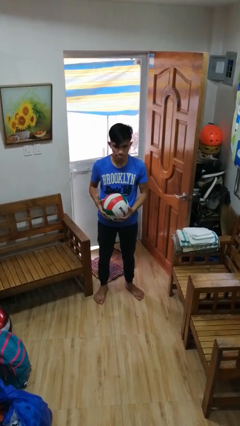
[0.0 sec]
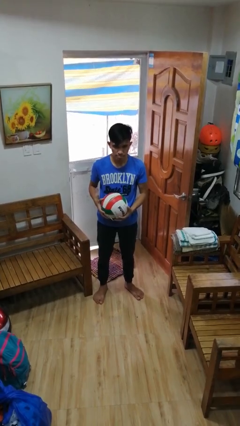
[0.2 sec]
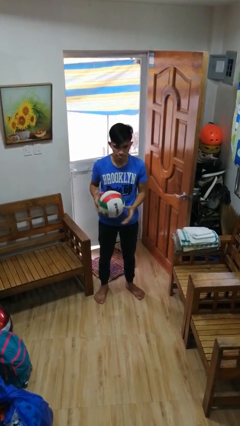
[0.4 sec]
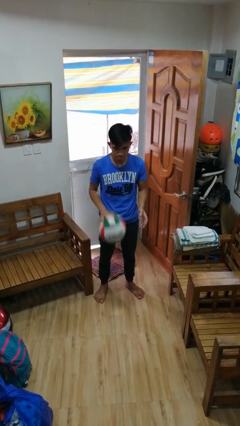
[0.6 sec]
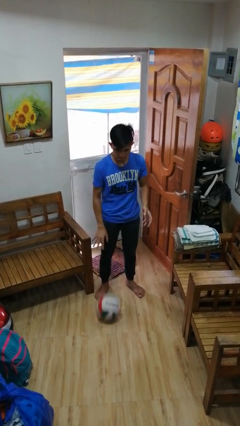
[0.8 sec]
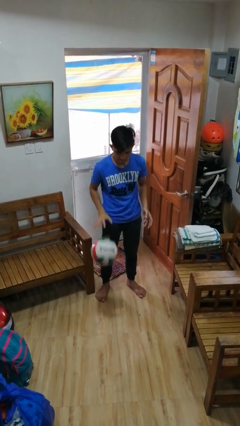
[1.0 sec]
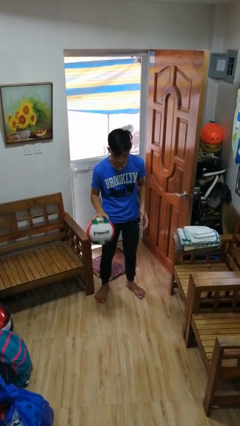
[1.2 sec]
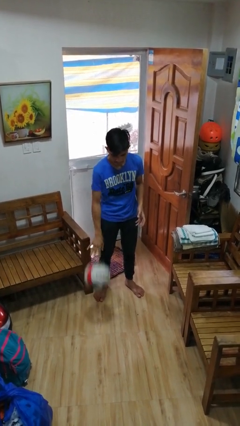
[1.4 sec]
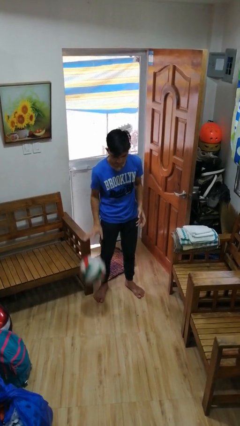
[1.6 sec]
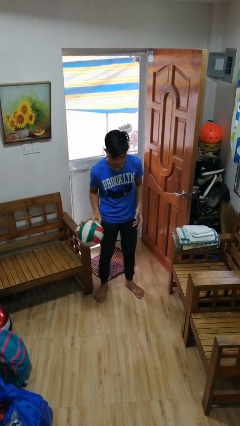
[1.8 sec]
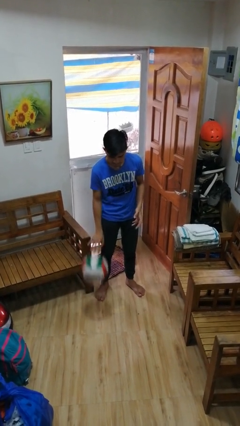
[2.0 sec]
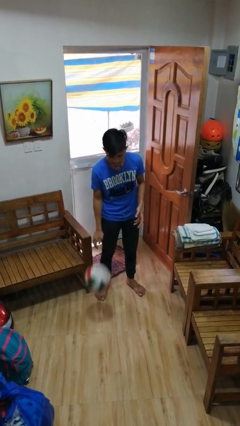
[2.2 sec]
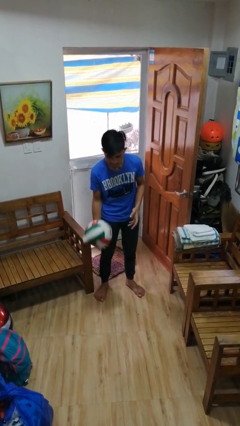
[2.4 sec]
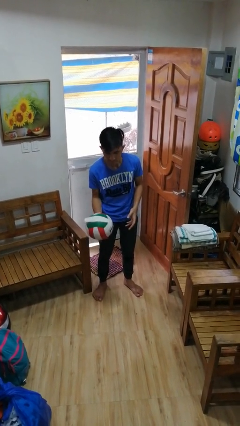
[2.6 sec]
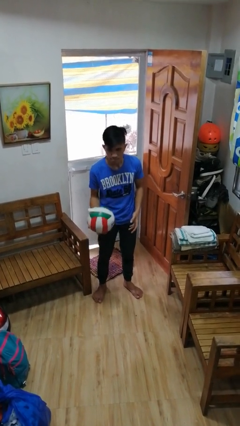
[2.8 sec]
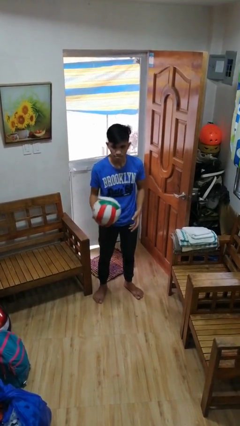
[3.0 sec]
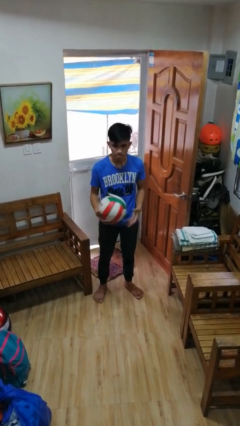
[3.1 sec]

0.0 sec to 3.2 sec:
person bounces ball on floor

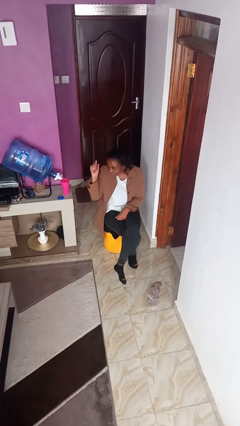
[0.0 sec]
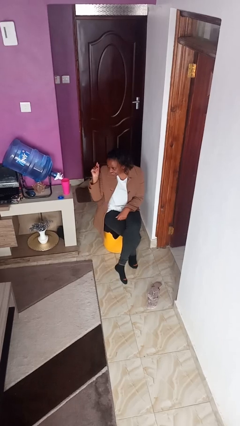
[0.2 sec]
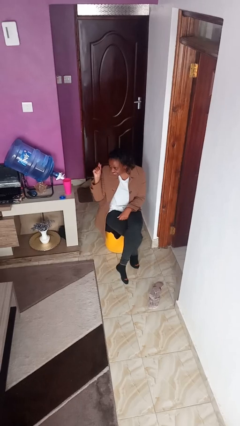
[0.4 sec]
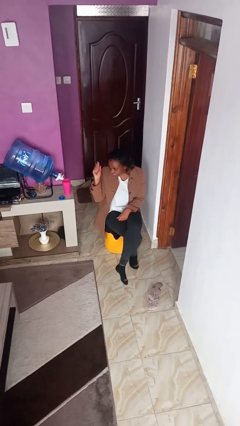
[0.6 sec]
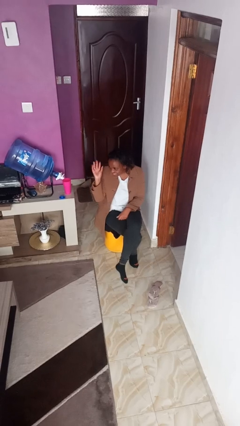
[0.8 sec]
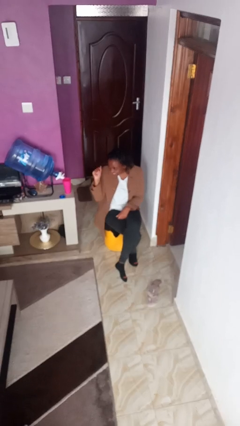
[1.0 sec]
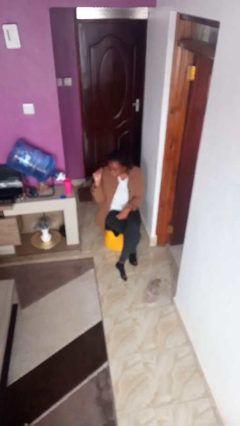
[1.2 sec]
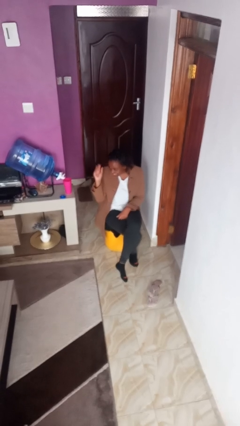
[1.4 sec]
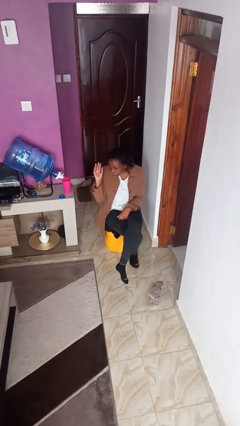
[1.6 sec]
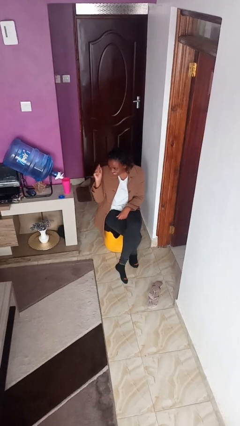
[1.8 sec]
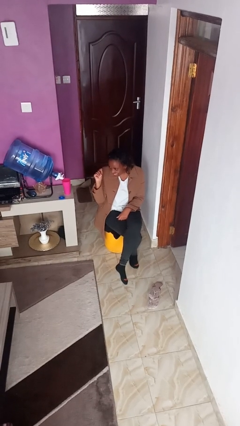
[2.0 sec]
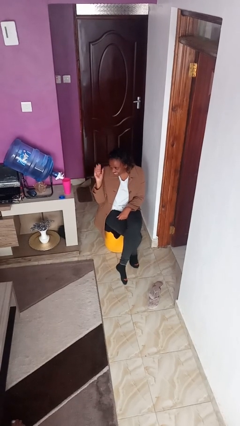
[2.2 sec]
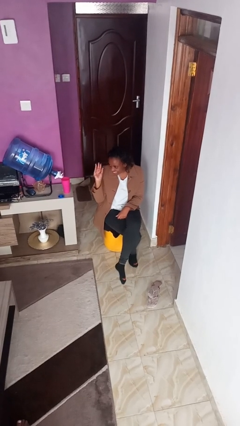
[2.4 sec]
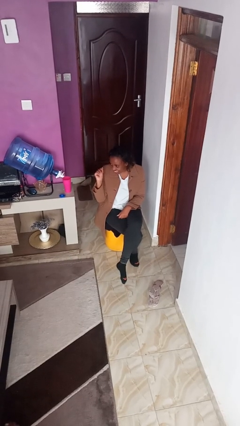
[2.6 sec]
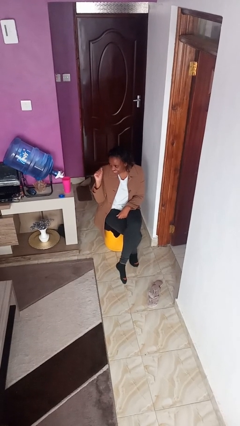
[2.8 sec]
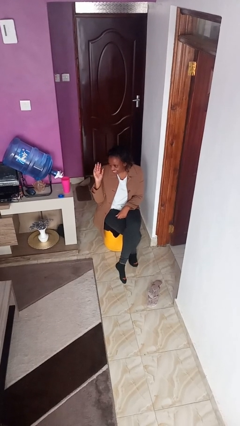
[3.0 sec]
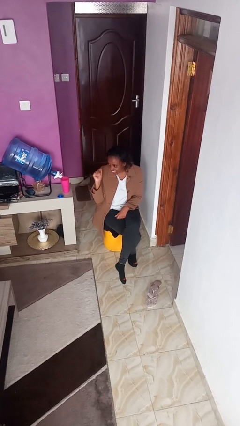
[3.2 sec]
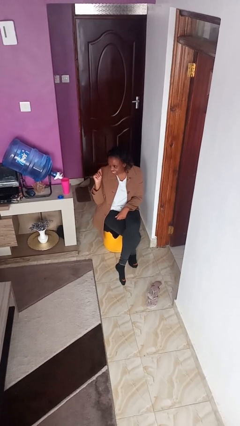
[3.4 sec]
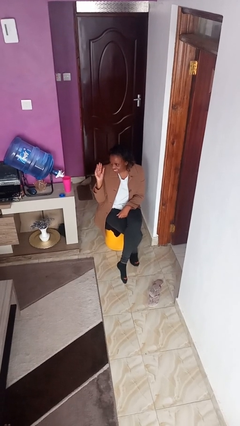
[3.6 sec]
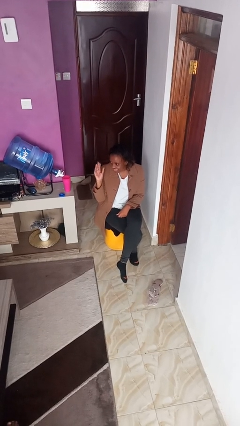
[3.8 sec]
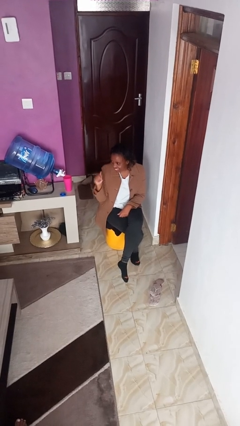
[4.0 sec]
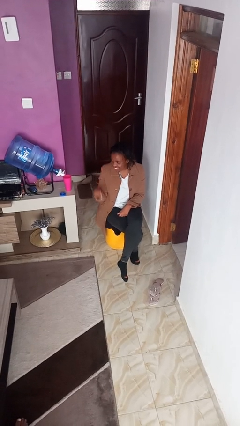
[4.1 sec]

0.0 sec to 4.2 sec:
person gestures come here

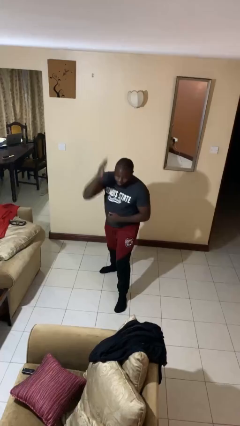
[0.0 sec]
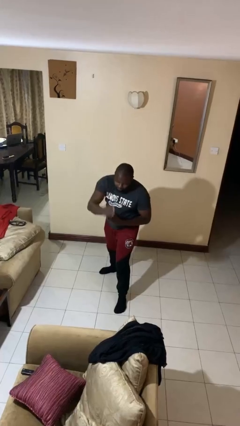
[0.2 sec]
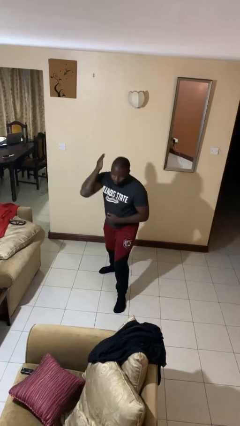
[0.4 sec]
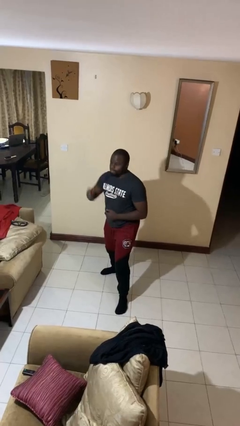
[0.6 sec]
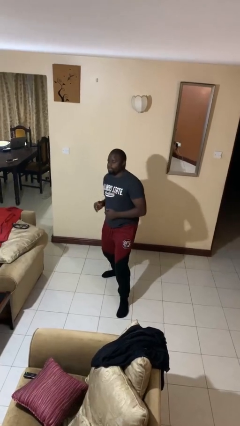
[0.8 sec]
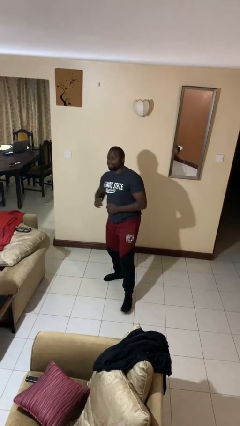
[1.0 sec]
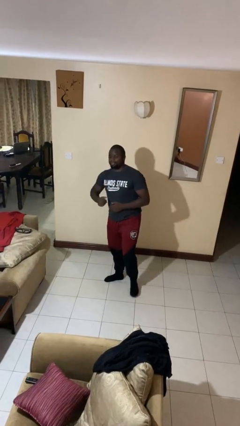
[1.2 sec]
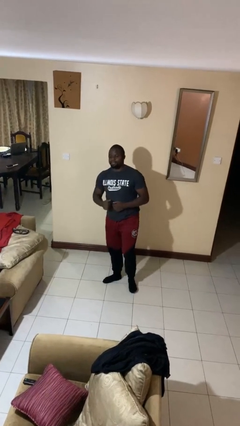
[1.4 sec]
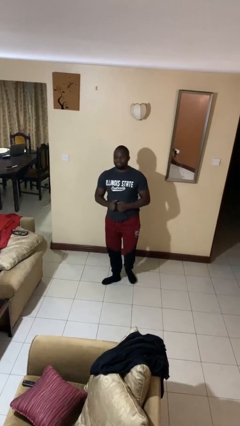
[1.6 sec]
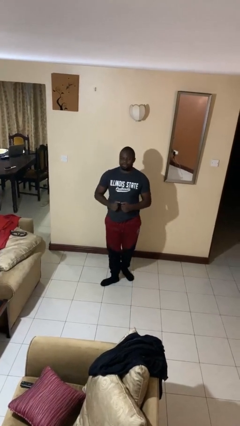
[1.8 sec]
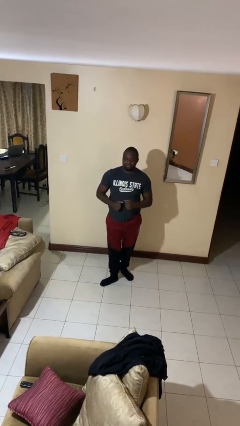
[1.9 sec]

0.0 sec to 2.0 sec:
person karate chop

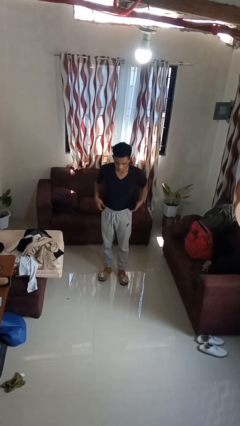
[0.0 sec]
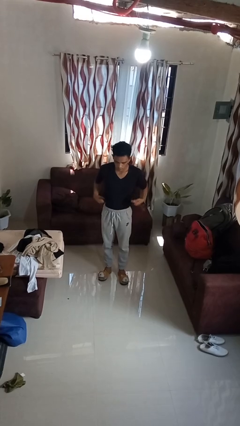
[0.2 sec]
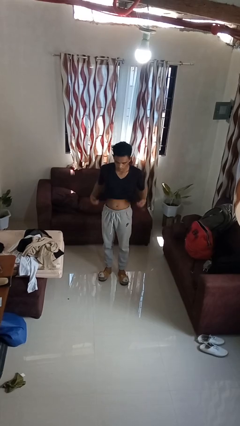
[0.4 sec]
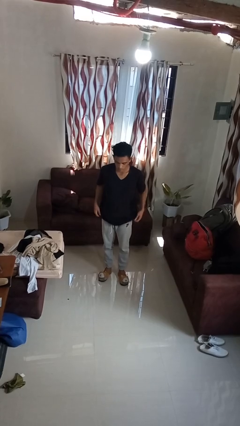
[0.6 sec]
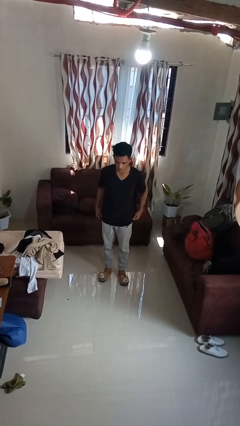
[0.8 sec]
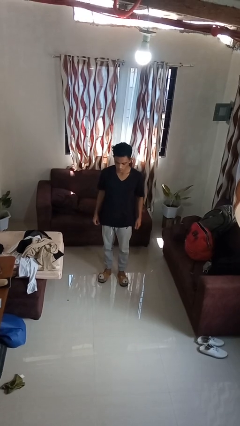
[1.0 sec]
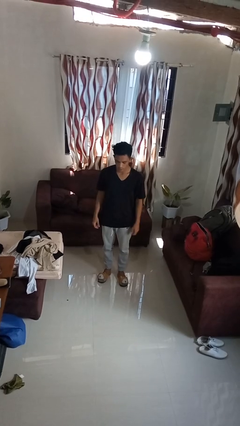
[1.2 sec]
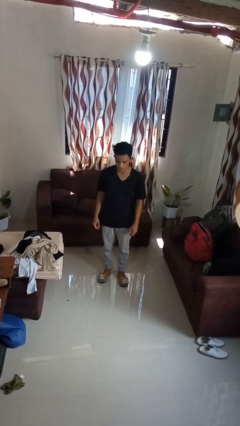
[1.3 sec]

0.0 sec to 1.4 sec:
person untucks shirt

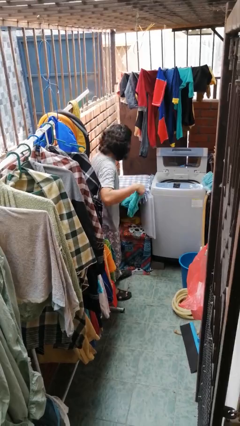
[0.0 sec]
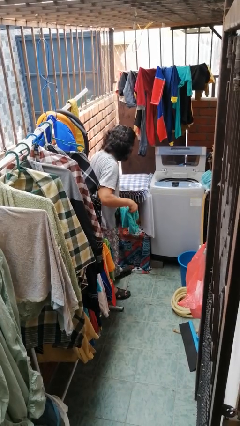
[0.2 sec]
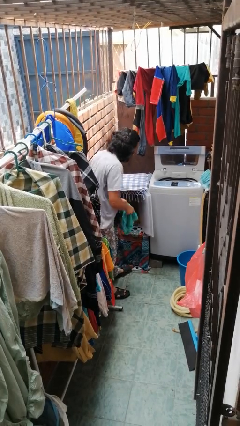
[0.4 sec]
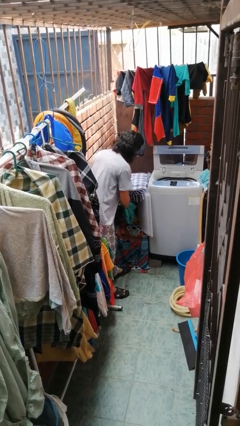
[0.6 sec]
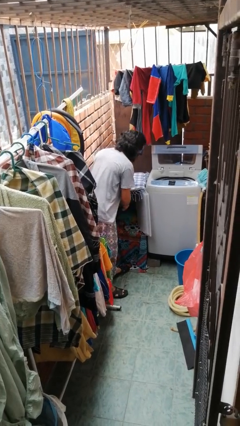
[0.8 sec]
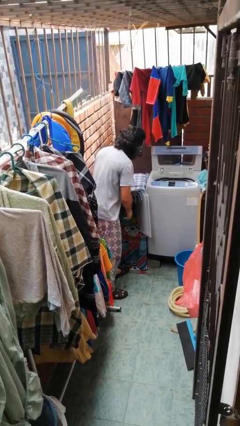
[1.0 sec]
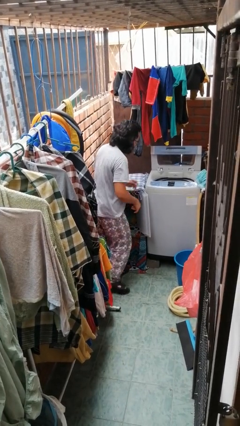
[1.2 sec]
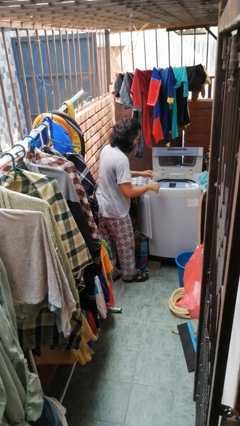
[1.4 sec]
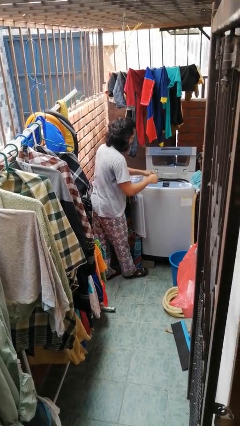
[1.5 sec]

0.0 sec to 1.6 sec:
person loads dryer

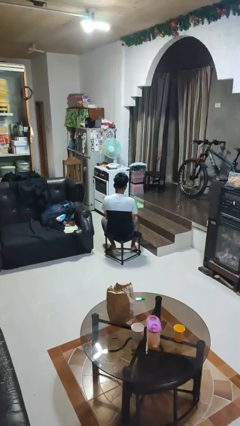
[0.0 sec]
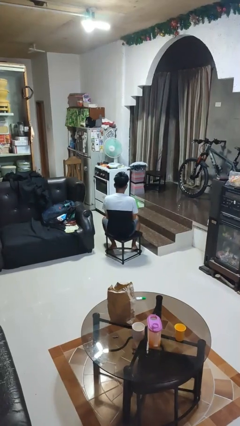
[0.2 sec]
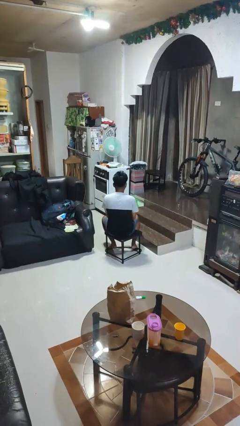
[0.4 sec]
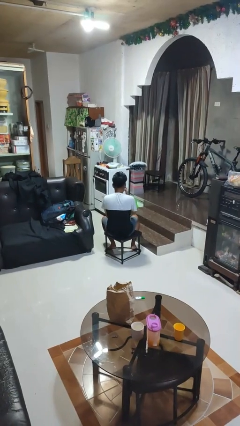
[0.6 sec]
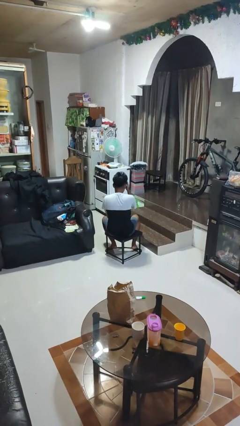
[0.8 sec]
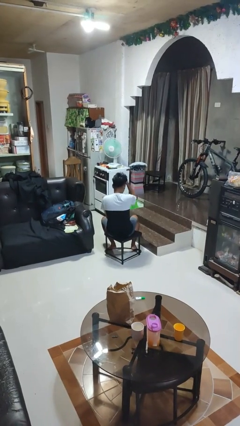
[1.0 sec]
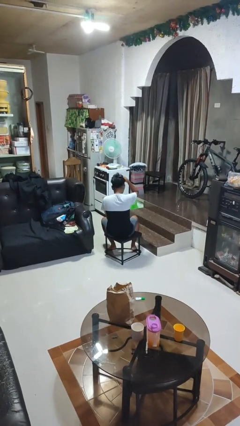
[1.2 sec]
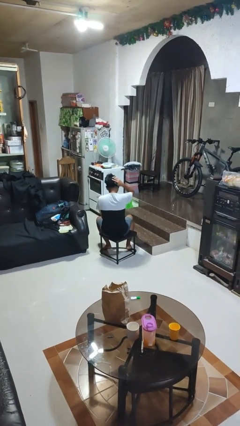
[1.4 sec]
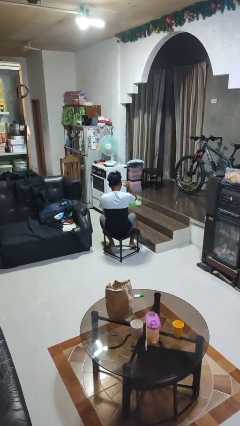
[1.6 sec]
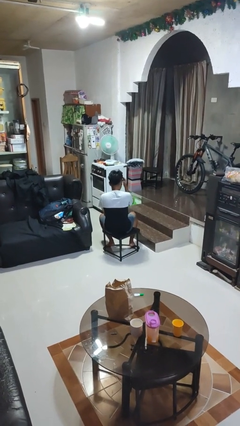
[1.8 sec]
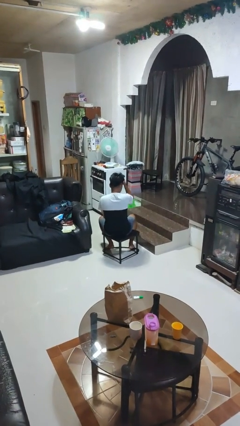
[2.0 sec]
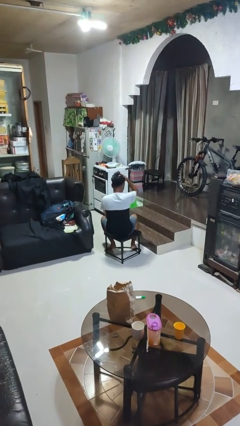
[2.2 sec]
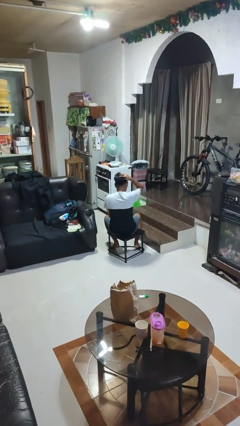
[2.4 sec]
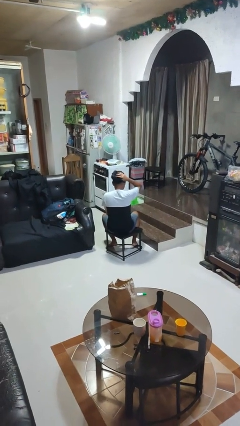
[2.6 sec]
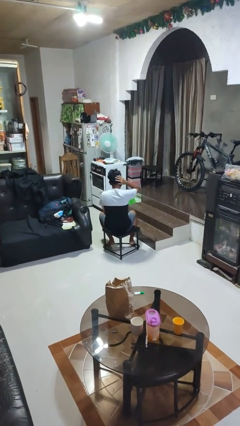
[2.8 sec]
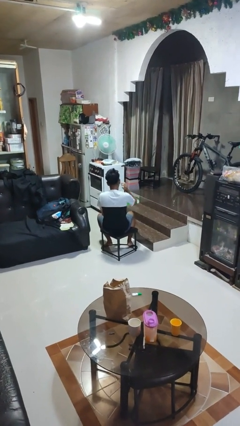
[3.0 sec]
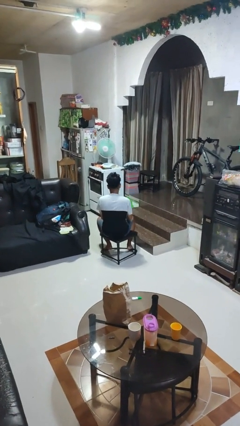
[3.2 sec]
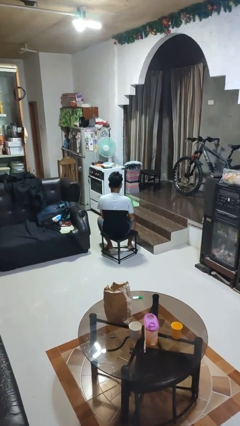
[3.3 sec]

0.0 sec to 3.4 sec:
person strokes hair

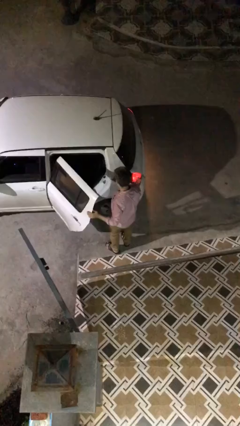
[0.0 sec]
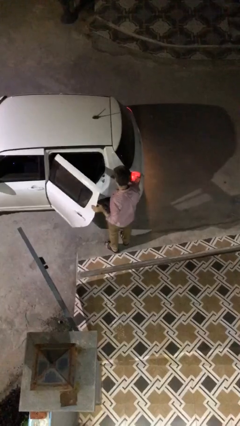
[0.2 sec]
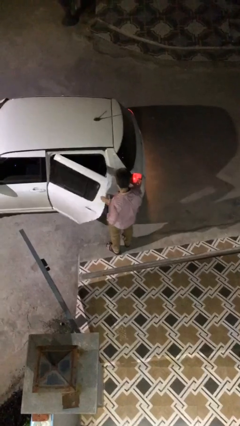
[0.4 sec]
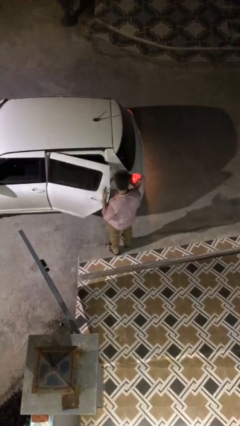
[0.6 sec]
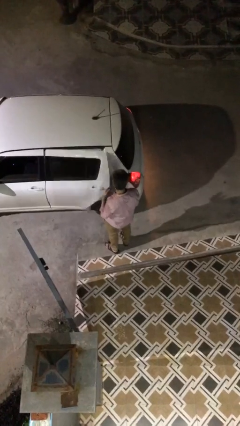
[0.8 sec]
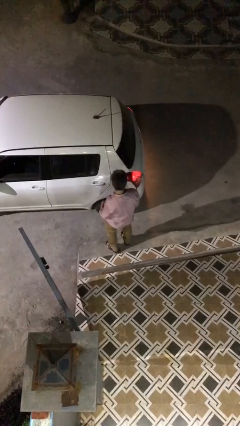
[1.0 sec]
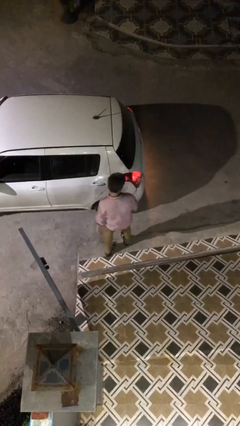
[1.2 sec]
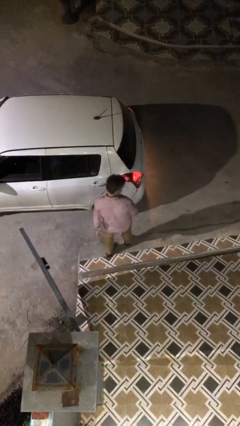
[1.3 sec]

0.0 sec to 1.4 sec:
person closes car door
